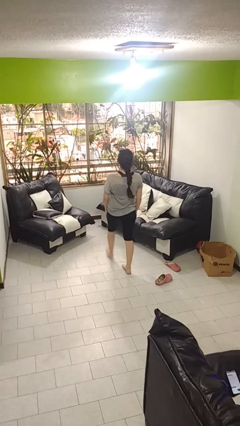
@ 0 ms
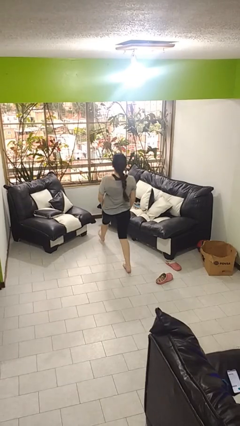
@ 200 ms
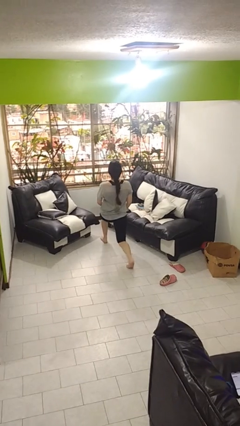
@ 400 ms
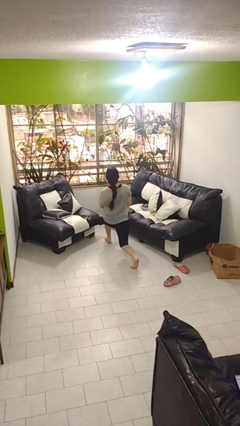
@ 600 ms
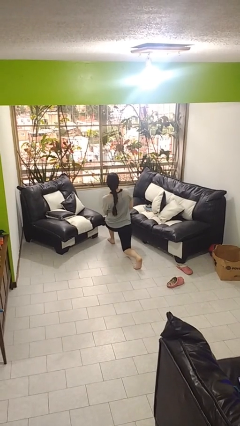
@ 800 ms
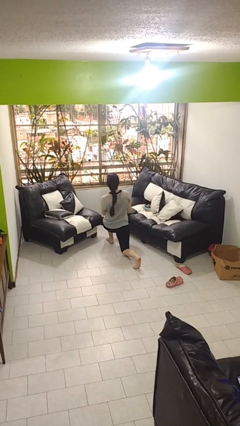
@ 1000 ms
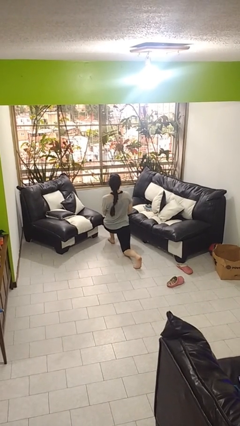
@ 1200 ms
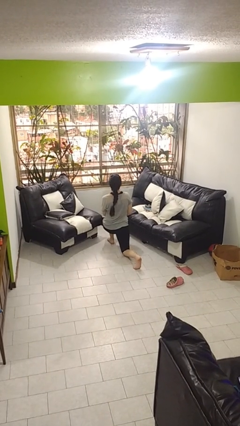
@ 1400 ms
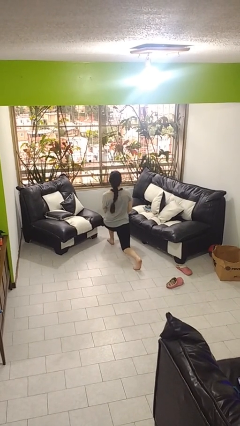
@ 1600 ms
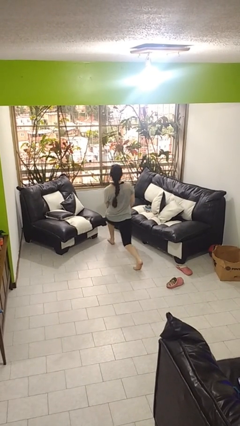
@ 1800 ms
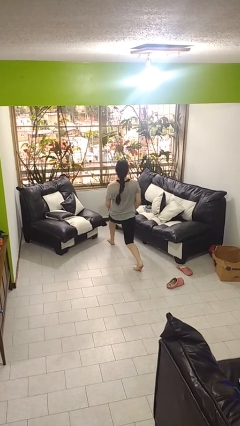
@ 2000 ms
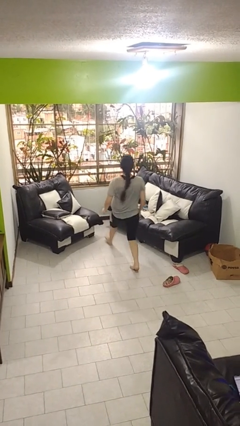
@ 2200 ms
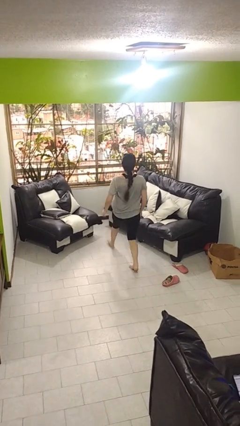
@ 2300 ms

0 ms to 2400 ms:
person exercises with lunges

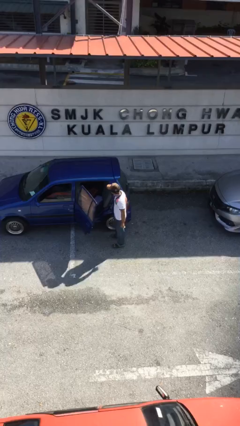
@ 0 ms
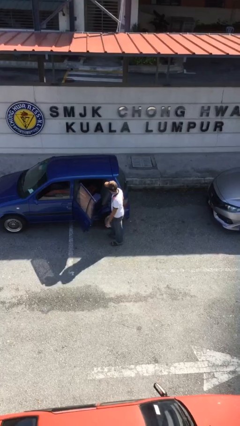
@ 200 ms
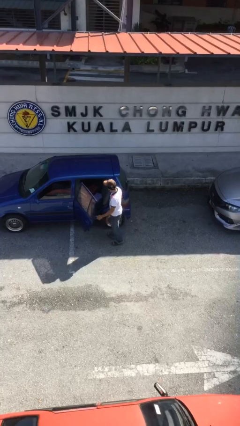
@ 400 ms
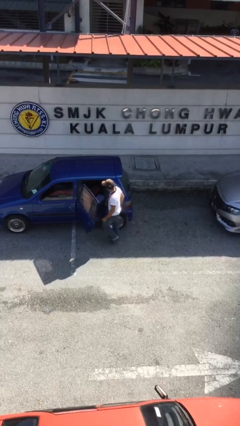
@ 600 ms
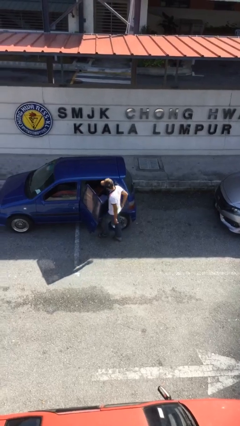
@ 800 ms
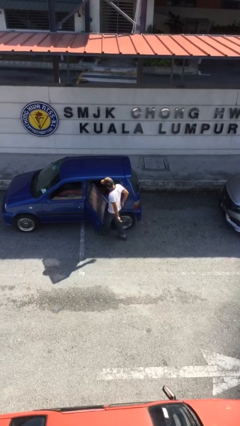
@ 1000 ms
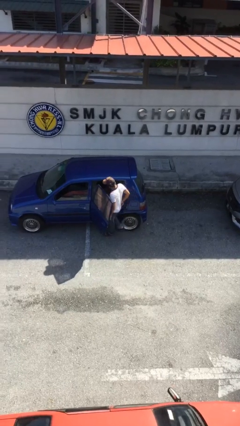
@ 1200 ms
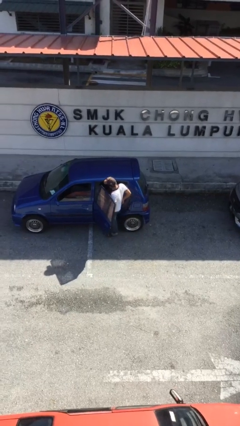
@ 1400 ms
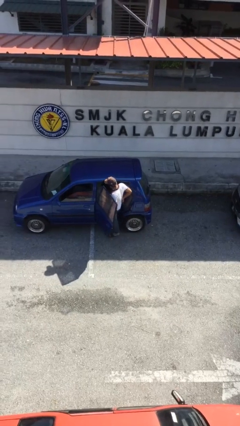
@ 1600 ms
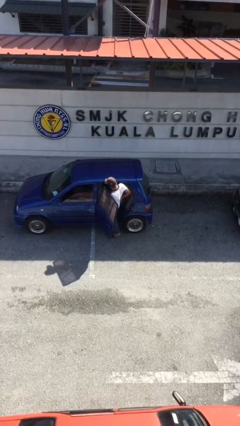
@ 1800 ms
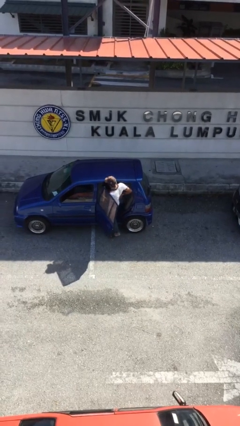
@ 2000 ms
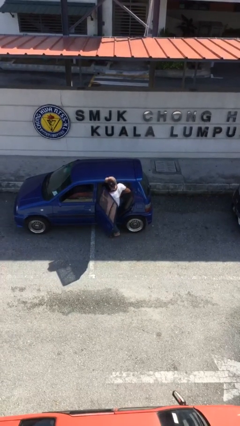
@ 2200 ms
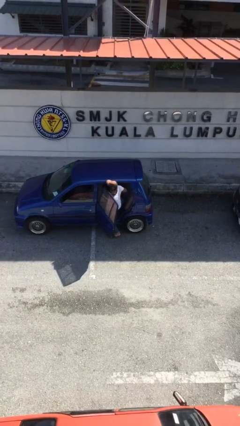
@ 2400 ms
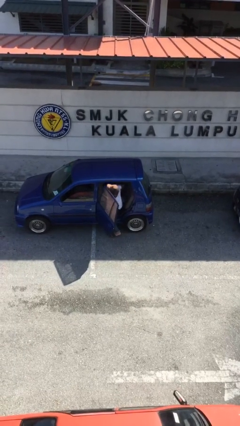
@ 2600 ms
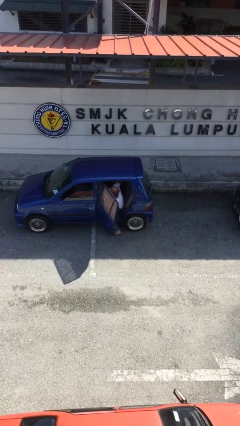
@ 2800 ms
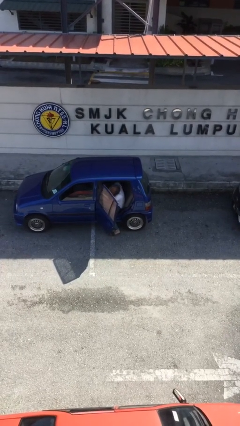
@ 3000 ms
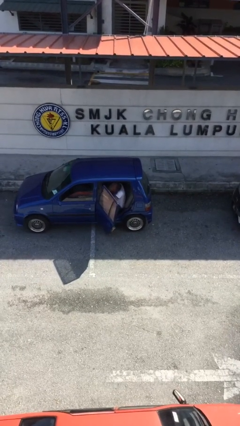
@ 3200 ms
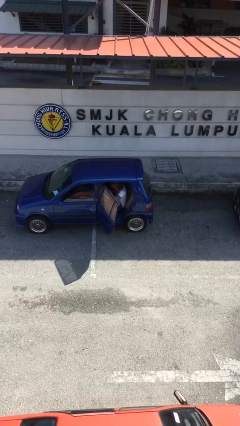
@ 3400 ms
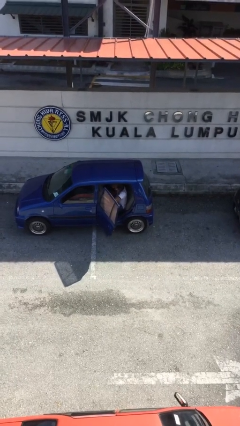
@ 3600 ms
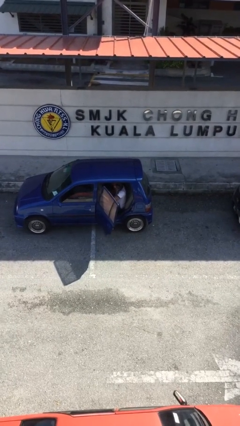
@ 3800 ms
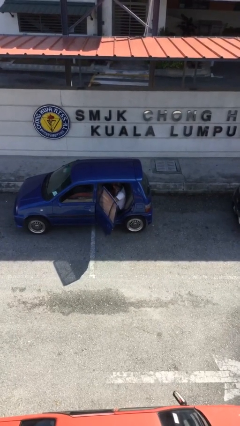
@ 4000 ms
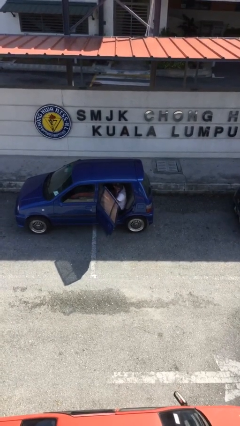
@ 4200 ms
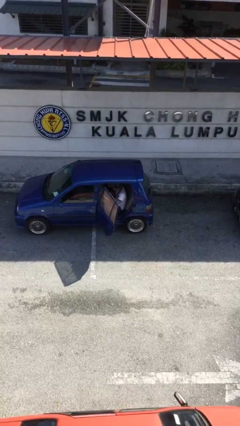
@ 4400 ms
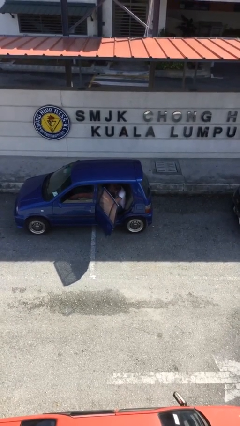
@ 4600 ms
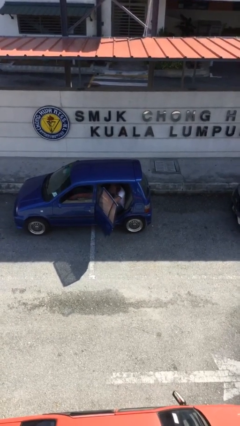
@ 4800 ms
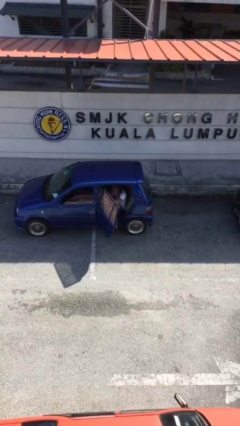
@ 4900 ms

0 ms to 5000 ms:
person enters car

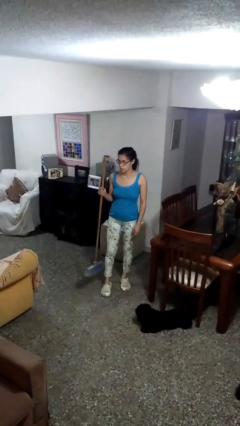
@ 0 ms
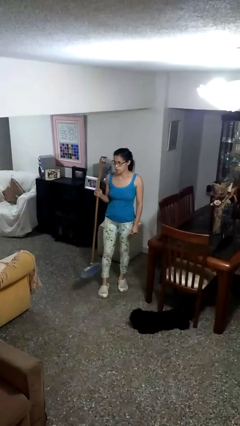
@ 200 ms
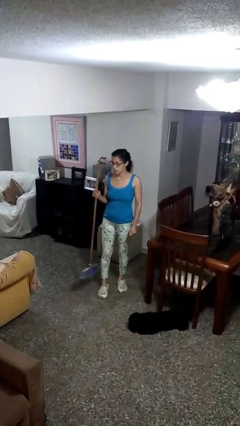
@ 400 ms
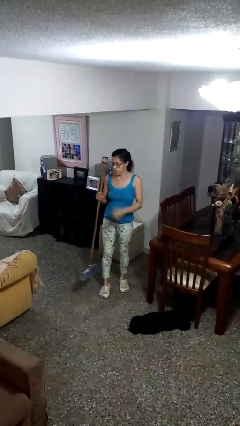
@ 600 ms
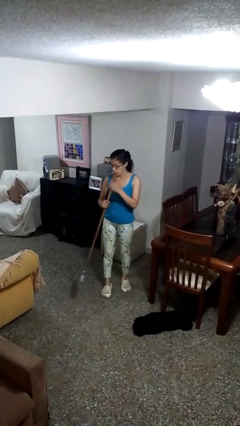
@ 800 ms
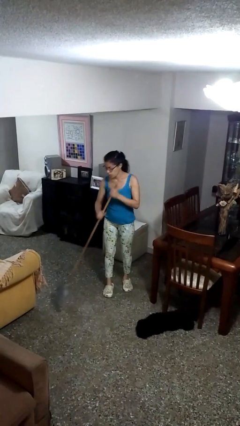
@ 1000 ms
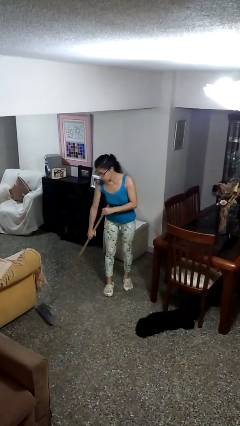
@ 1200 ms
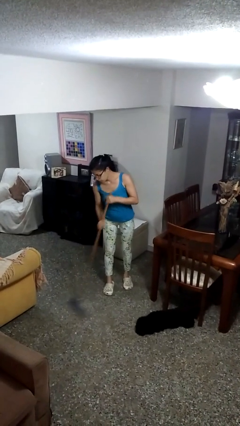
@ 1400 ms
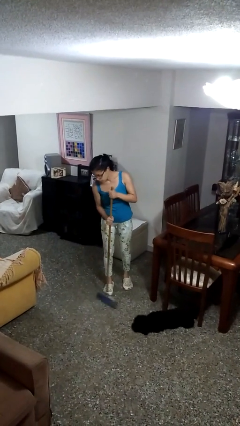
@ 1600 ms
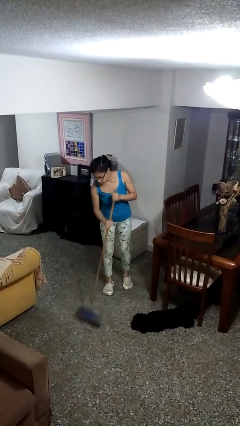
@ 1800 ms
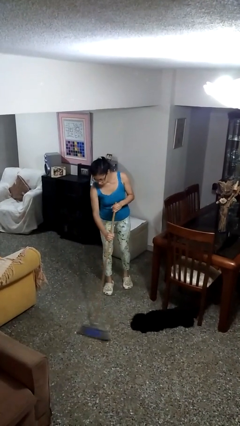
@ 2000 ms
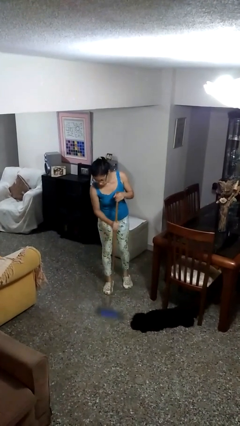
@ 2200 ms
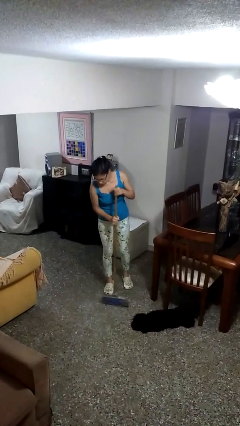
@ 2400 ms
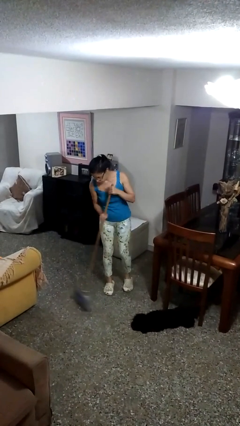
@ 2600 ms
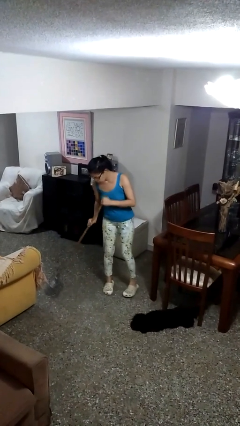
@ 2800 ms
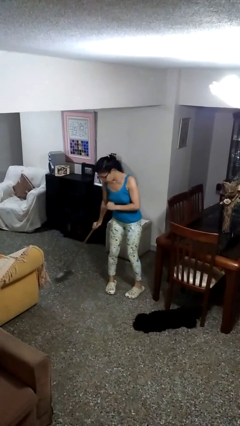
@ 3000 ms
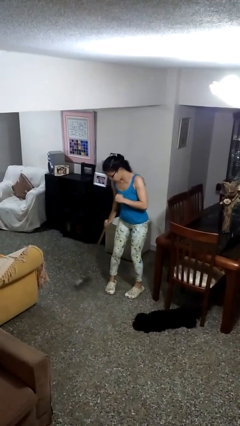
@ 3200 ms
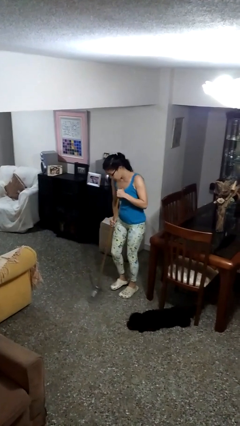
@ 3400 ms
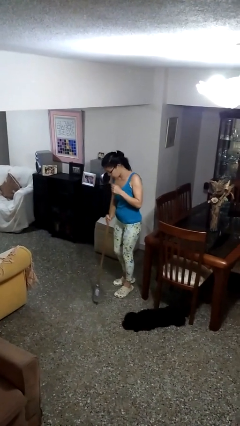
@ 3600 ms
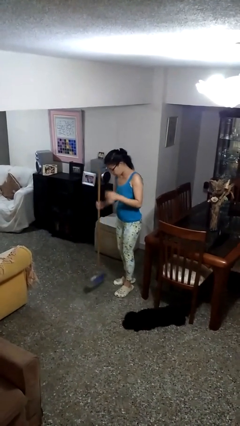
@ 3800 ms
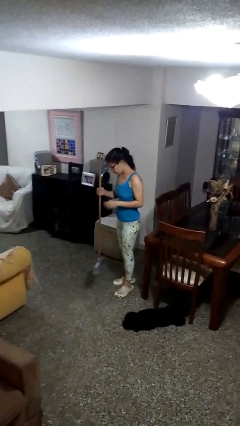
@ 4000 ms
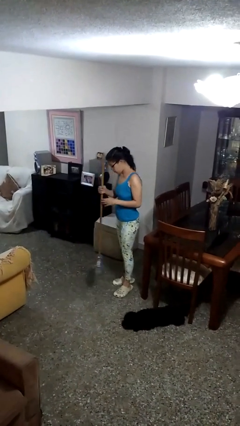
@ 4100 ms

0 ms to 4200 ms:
person sweeps floor

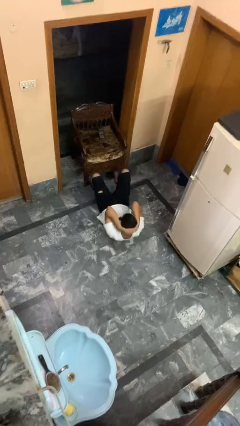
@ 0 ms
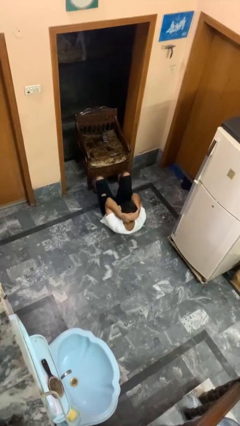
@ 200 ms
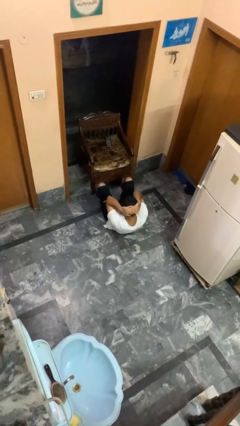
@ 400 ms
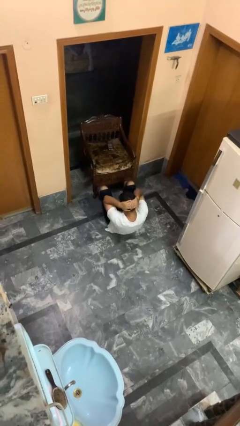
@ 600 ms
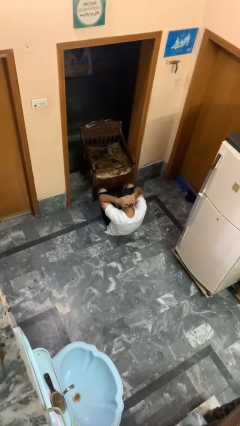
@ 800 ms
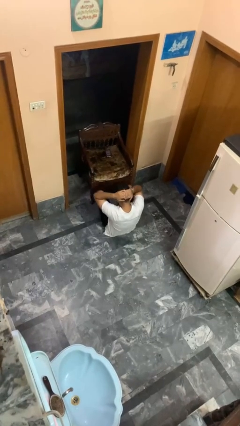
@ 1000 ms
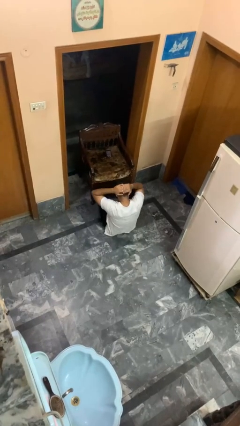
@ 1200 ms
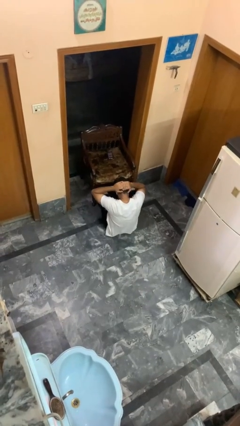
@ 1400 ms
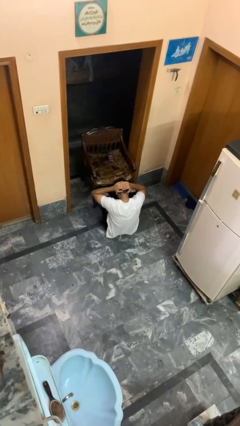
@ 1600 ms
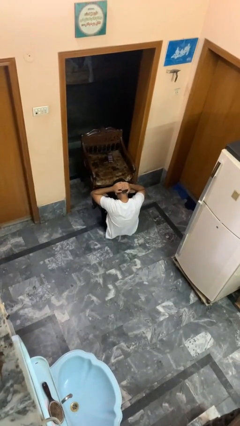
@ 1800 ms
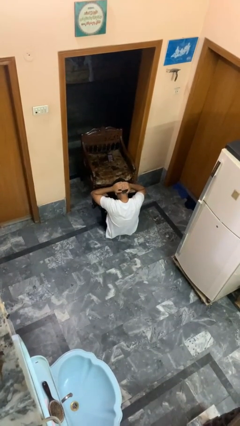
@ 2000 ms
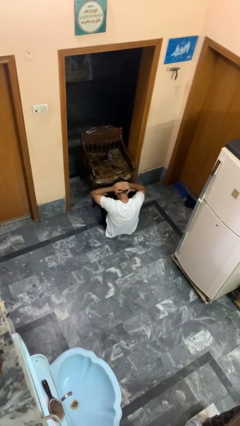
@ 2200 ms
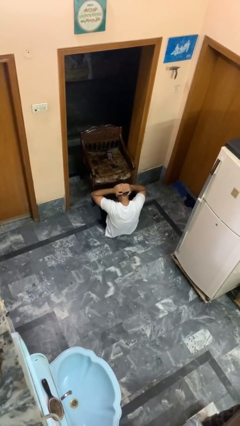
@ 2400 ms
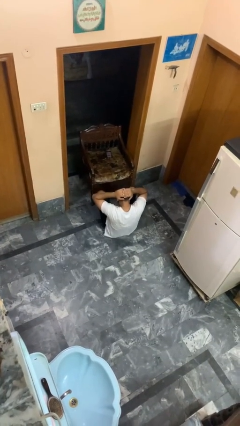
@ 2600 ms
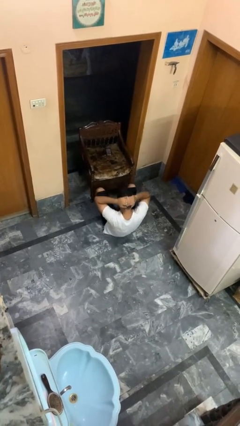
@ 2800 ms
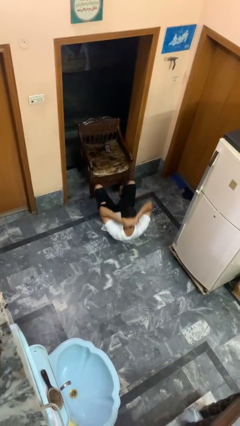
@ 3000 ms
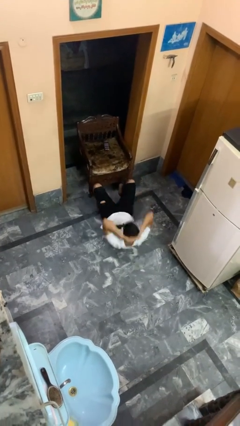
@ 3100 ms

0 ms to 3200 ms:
person exercises with situp

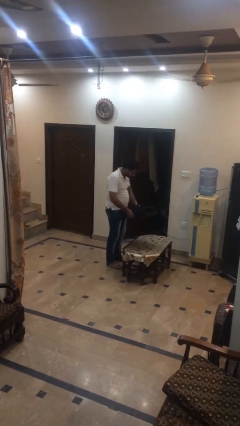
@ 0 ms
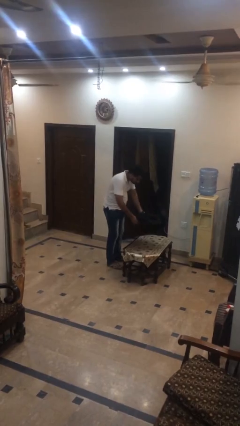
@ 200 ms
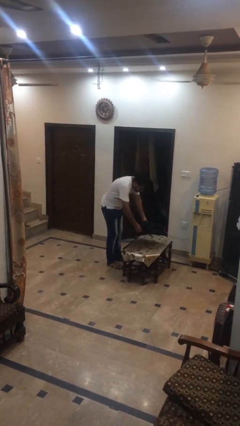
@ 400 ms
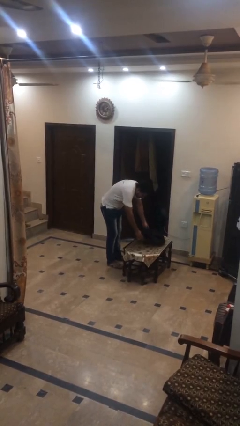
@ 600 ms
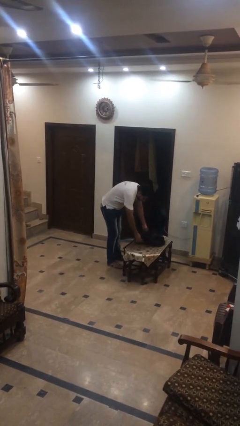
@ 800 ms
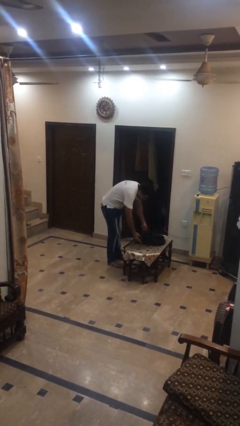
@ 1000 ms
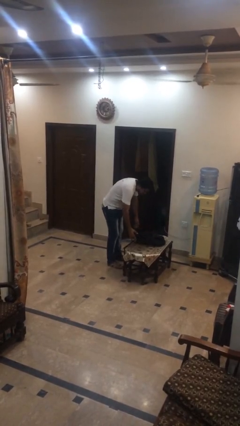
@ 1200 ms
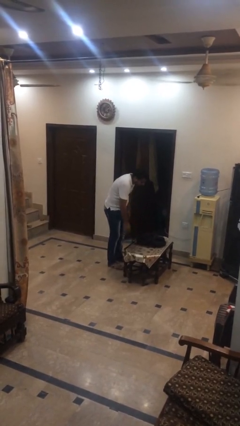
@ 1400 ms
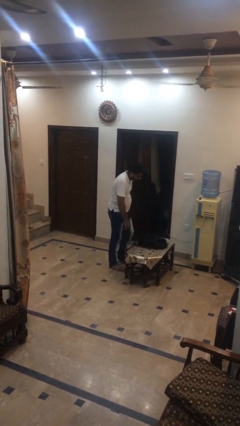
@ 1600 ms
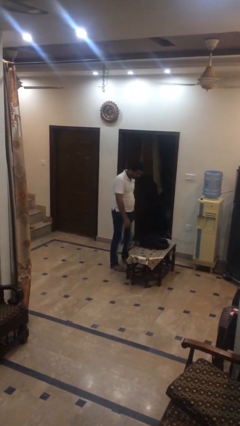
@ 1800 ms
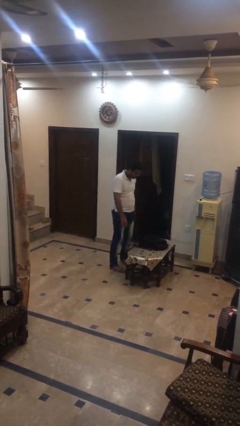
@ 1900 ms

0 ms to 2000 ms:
person puts down object on table
